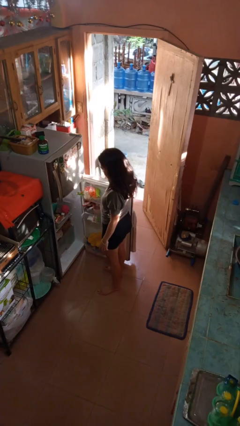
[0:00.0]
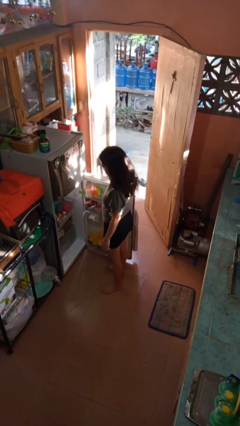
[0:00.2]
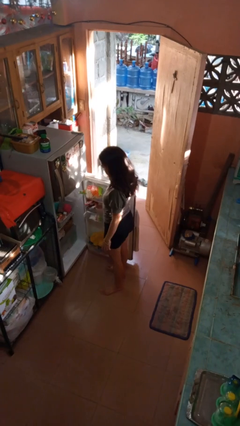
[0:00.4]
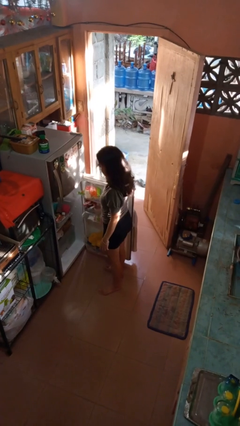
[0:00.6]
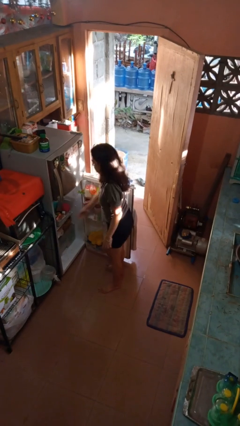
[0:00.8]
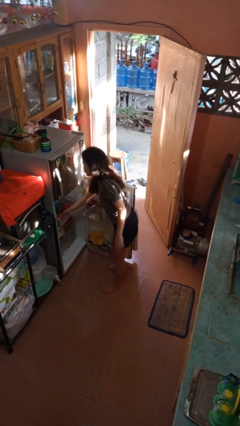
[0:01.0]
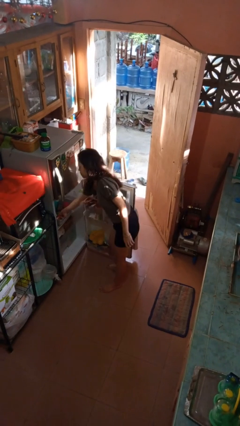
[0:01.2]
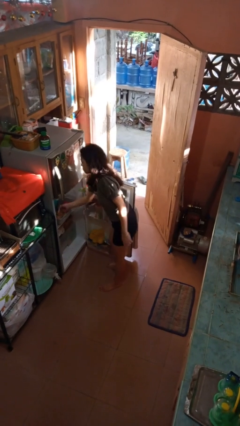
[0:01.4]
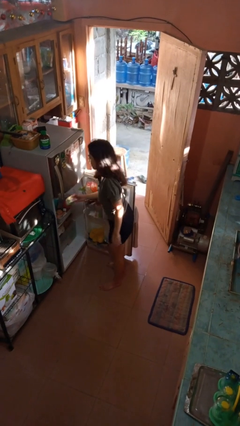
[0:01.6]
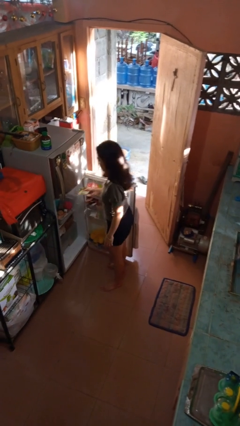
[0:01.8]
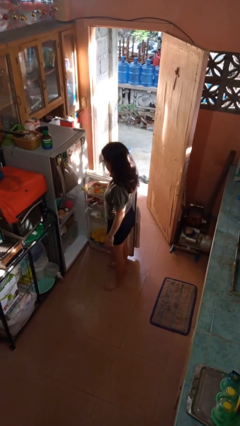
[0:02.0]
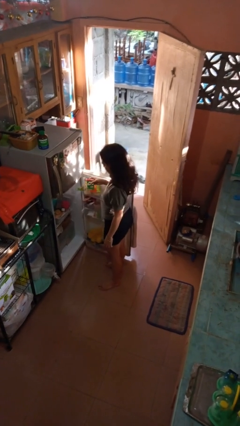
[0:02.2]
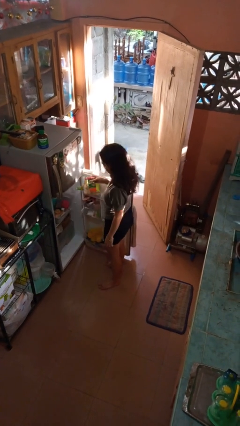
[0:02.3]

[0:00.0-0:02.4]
person takes object from refrigerator

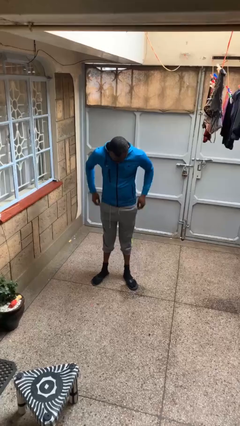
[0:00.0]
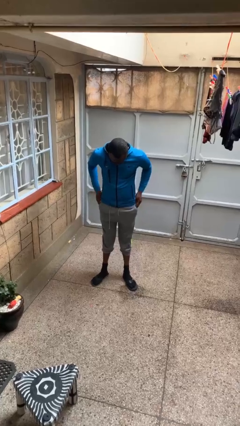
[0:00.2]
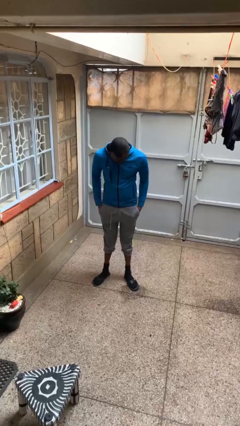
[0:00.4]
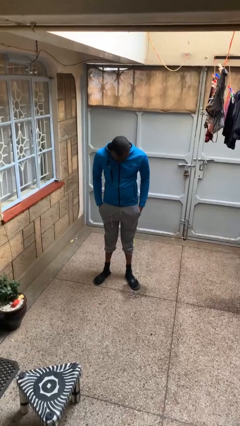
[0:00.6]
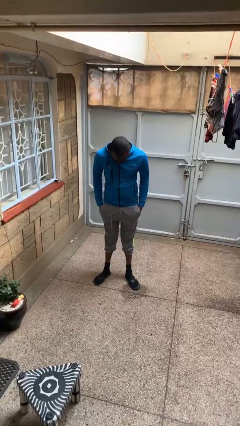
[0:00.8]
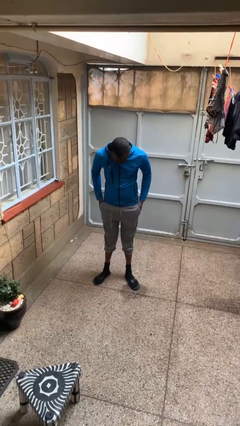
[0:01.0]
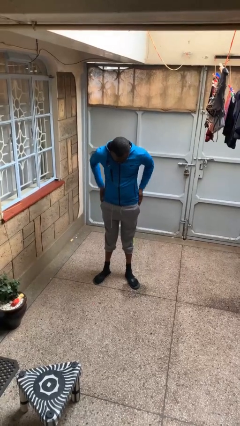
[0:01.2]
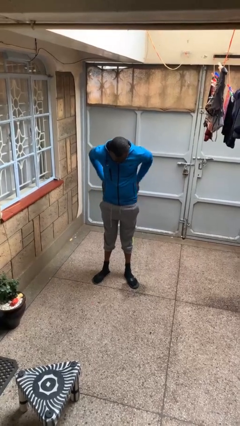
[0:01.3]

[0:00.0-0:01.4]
person puts hands in back pockets

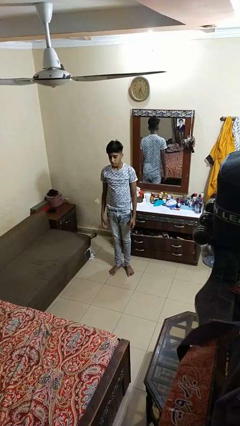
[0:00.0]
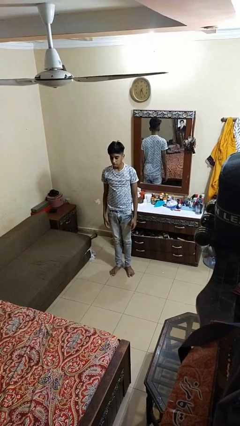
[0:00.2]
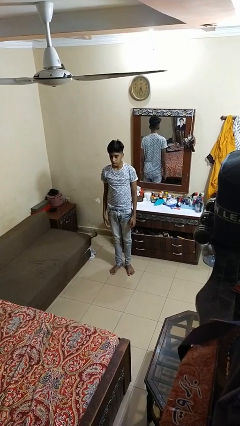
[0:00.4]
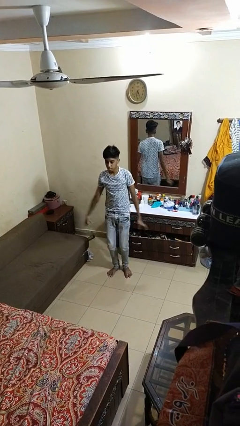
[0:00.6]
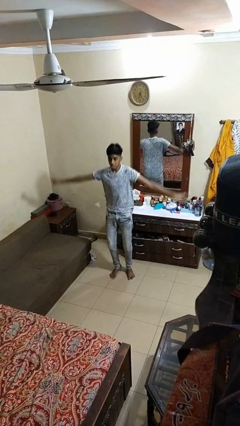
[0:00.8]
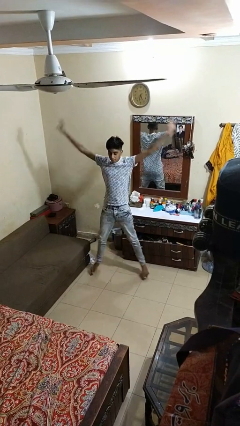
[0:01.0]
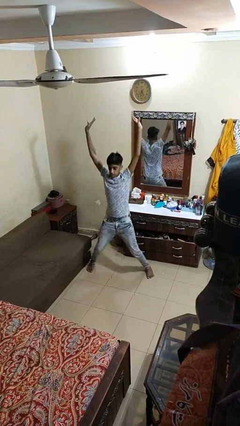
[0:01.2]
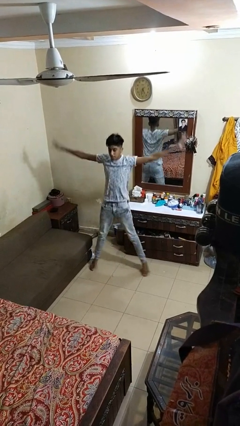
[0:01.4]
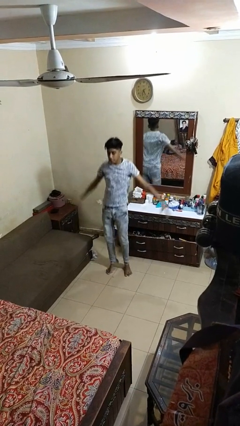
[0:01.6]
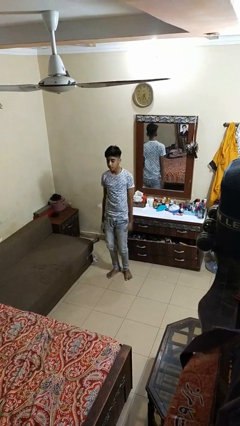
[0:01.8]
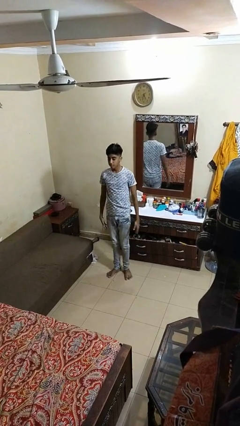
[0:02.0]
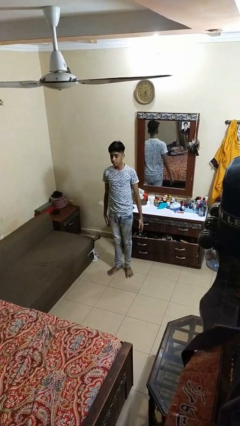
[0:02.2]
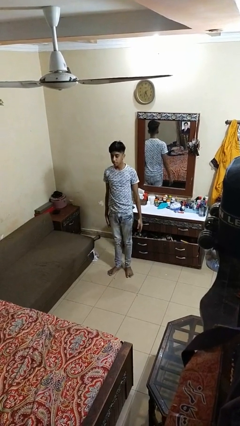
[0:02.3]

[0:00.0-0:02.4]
person exercises with jumping jacks

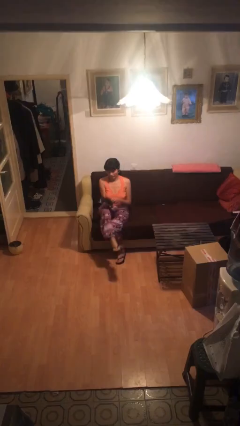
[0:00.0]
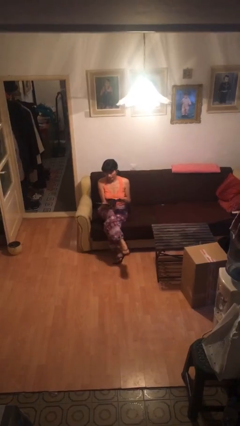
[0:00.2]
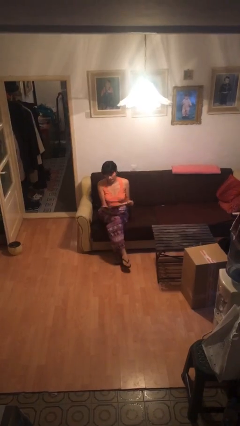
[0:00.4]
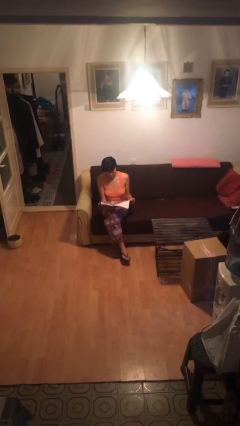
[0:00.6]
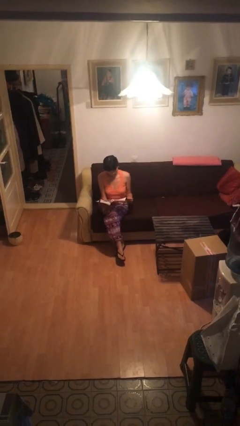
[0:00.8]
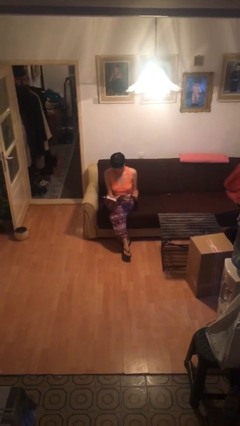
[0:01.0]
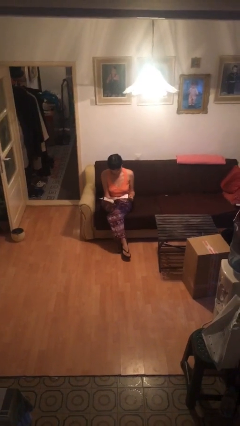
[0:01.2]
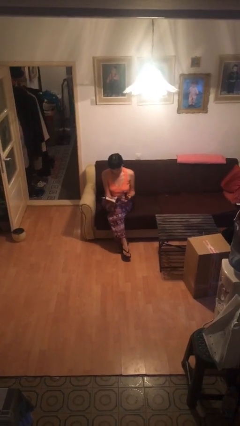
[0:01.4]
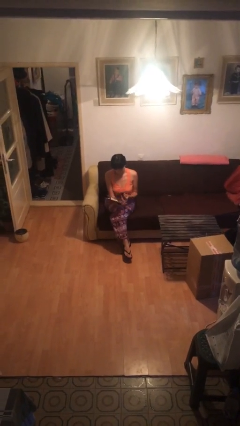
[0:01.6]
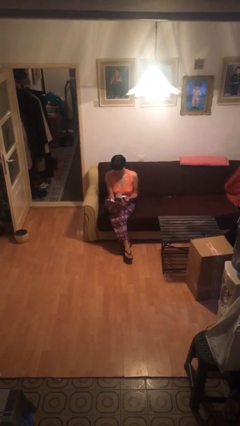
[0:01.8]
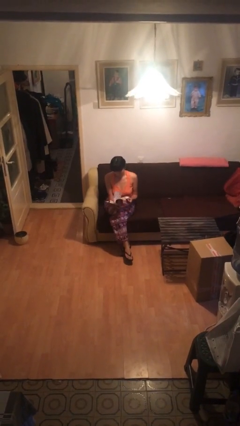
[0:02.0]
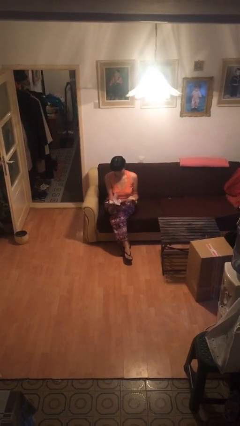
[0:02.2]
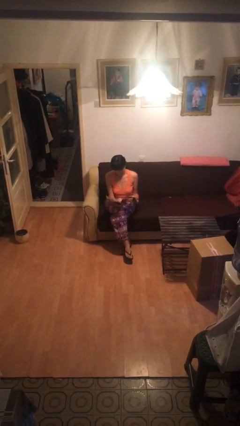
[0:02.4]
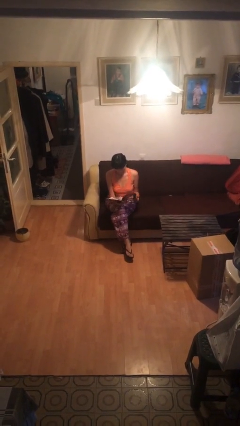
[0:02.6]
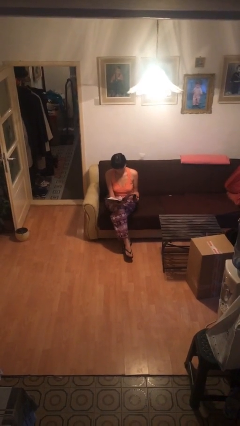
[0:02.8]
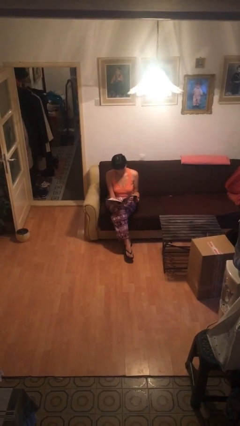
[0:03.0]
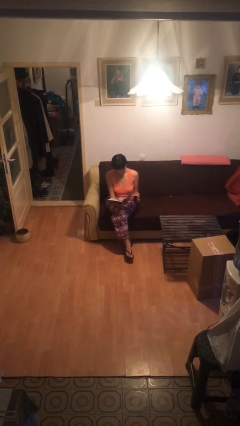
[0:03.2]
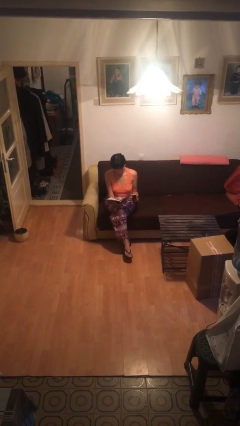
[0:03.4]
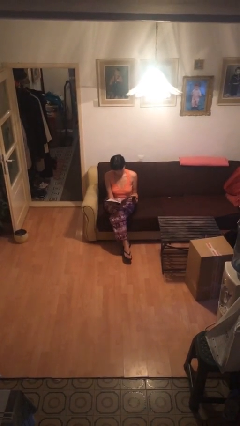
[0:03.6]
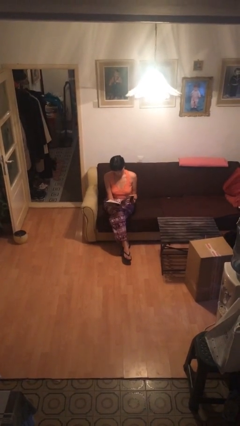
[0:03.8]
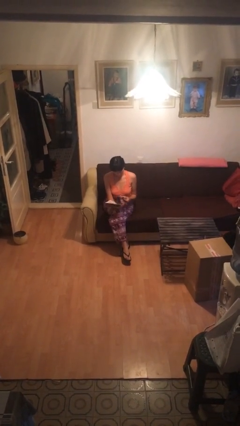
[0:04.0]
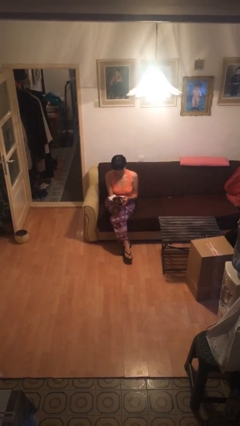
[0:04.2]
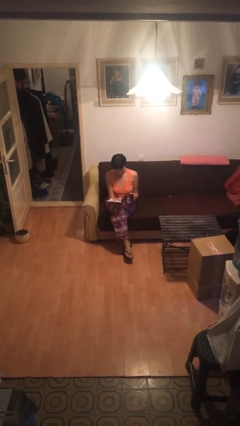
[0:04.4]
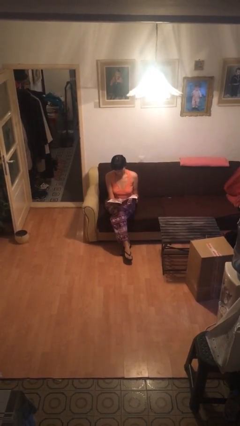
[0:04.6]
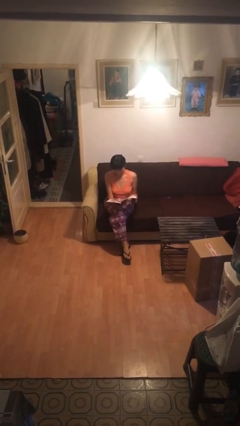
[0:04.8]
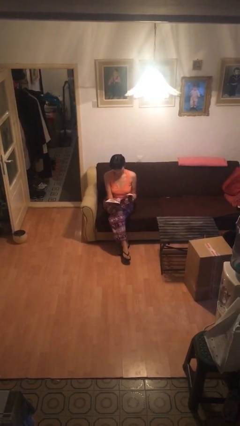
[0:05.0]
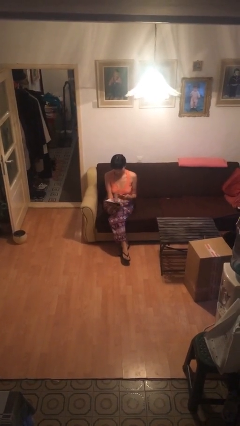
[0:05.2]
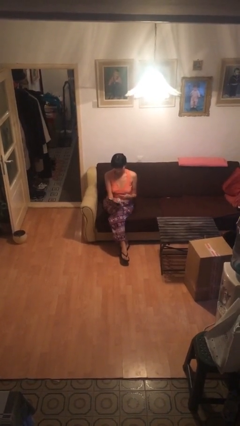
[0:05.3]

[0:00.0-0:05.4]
person reads document

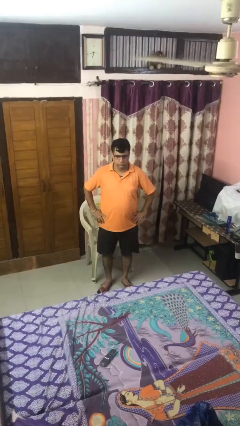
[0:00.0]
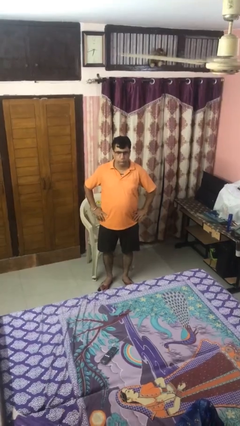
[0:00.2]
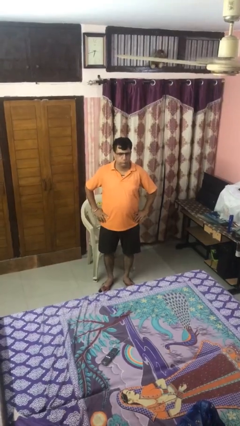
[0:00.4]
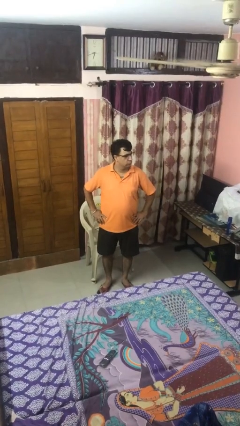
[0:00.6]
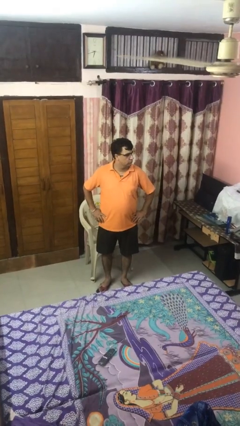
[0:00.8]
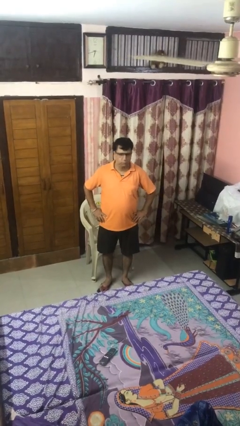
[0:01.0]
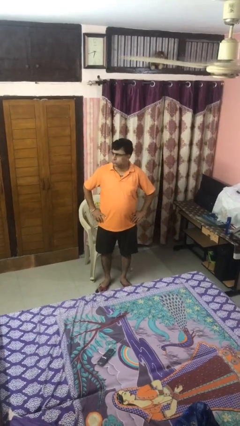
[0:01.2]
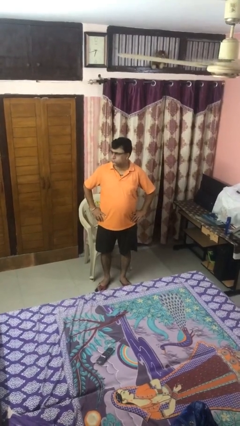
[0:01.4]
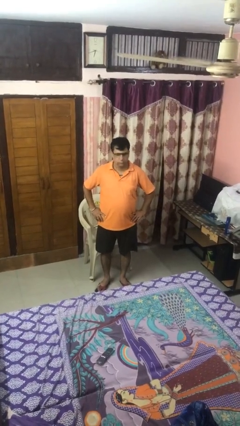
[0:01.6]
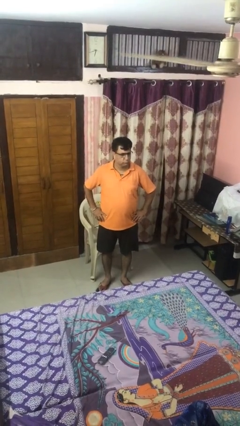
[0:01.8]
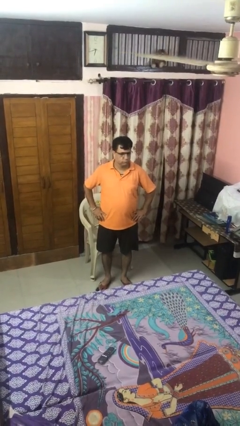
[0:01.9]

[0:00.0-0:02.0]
person shakes head

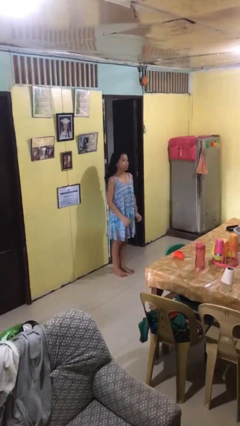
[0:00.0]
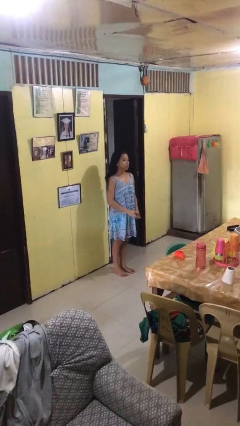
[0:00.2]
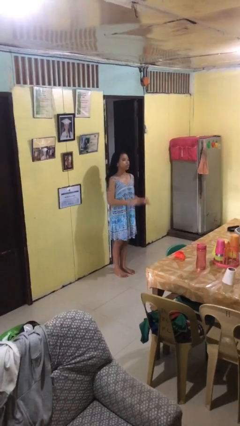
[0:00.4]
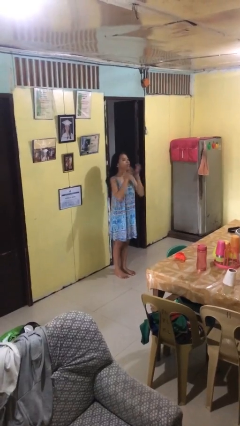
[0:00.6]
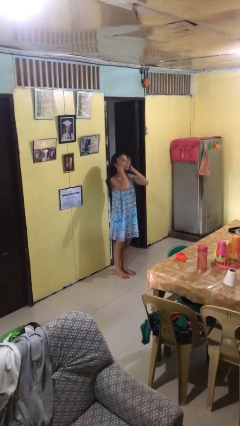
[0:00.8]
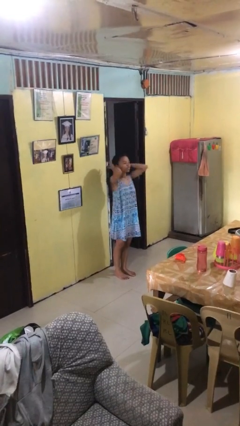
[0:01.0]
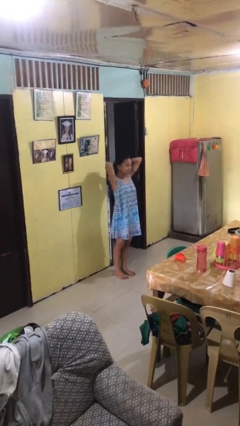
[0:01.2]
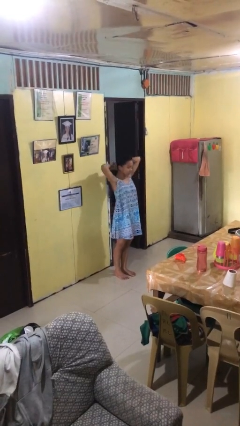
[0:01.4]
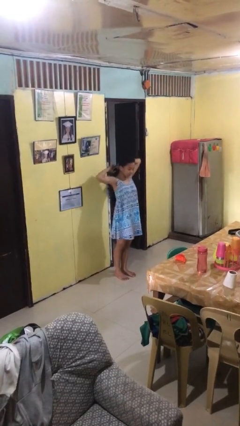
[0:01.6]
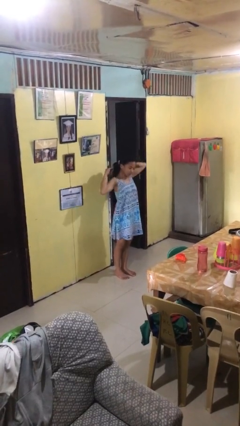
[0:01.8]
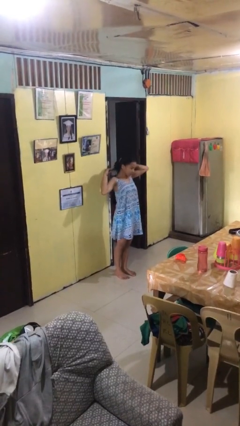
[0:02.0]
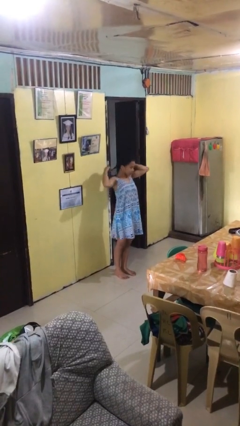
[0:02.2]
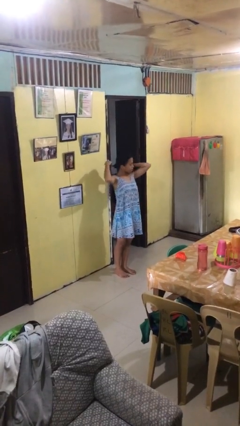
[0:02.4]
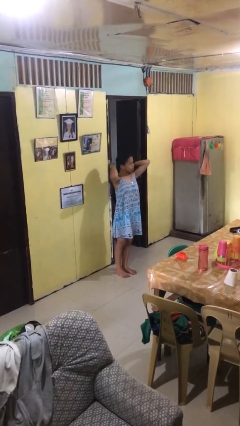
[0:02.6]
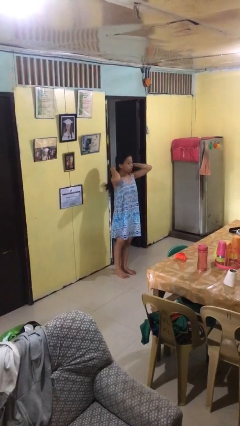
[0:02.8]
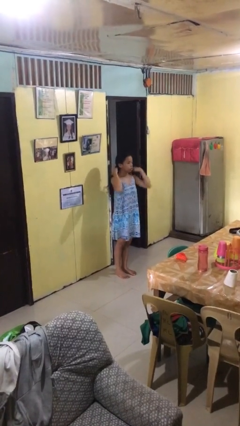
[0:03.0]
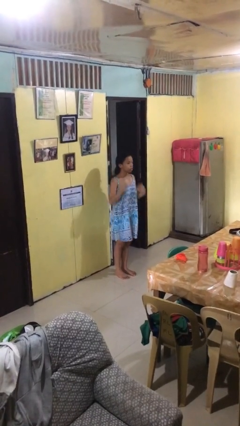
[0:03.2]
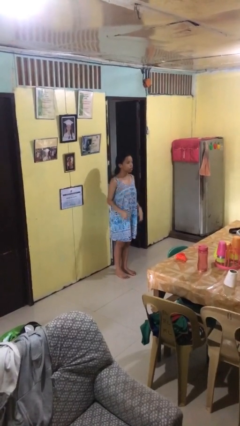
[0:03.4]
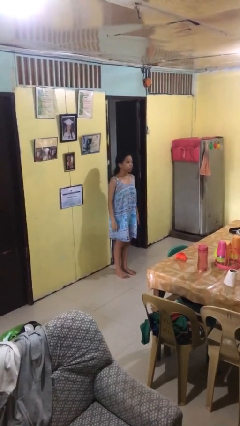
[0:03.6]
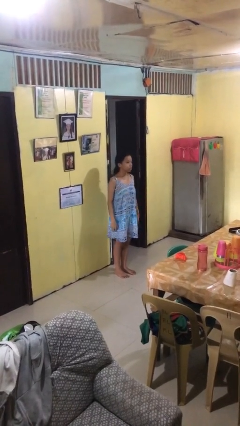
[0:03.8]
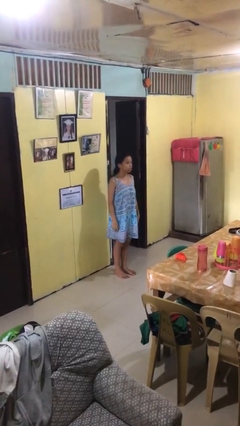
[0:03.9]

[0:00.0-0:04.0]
person puts hair in ponytail
